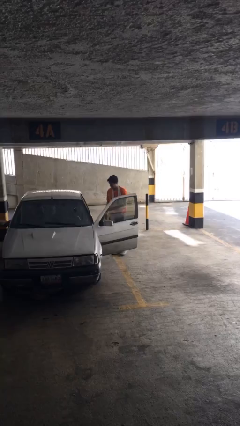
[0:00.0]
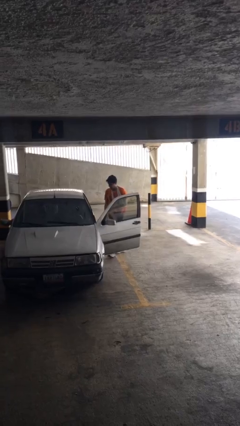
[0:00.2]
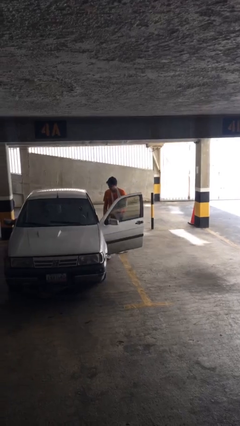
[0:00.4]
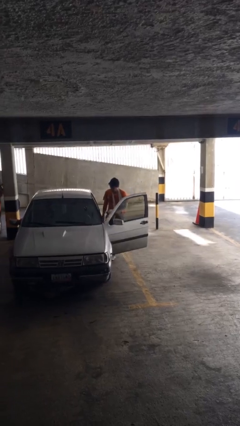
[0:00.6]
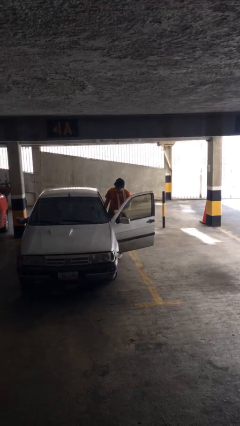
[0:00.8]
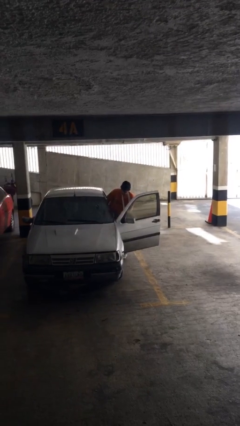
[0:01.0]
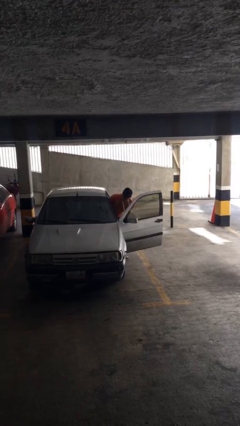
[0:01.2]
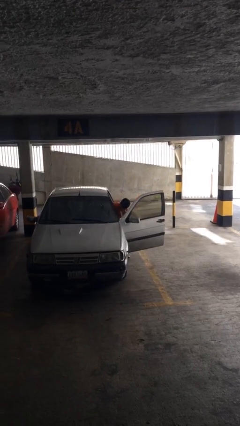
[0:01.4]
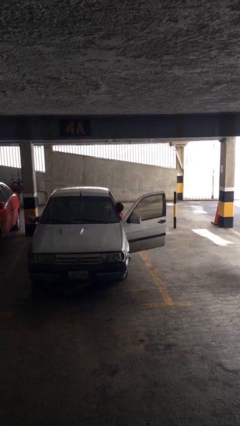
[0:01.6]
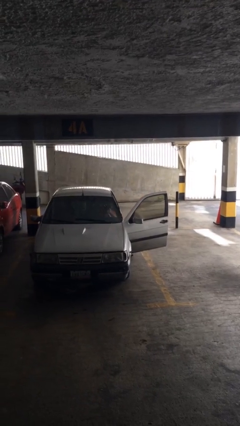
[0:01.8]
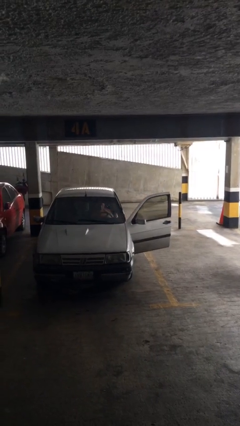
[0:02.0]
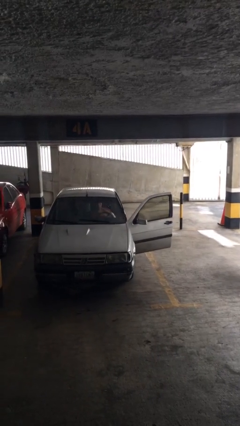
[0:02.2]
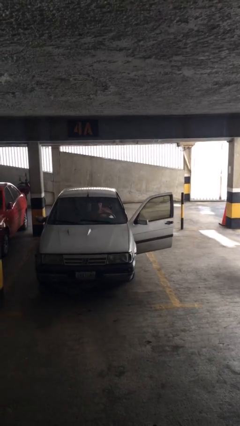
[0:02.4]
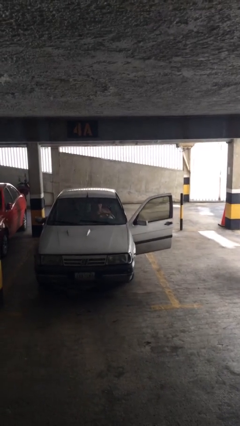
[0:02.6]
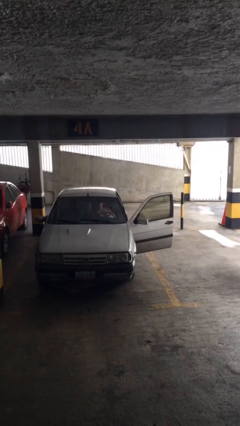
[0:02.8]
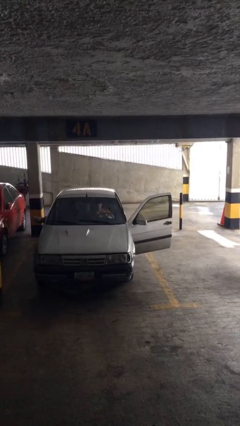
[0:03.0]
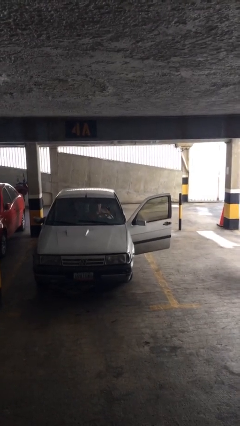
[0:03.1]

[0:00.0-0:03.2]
person enters car

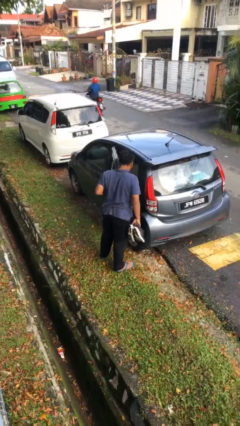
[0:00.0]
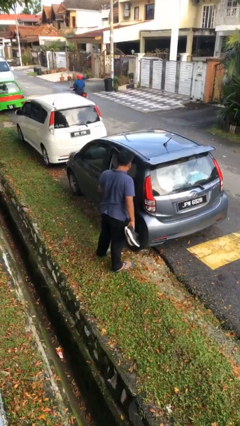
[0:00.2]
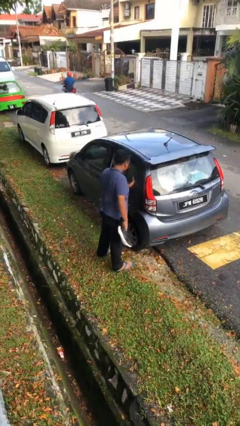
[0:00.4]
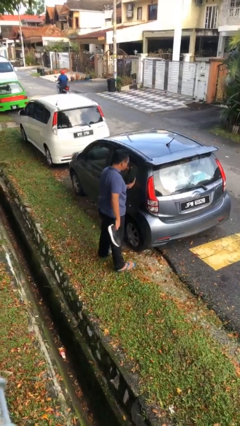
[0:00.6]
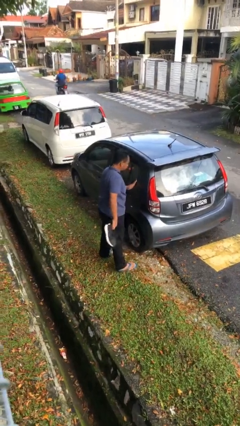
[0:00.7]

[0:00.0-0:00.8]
person closes car door

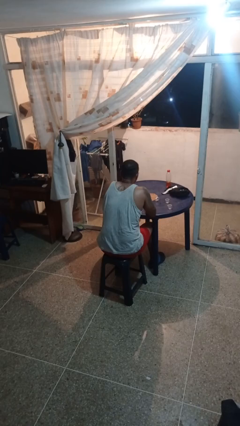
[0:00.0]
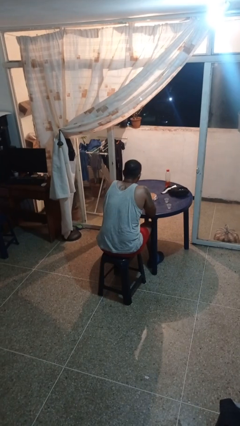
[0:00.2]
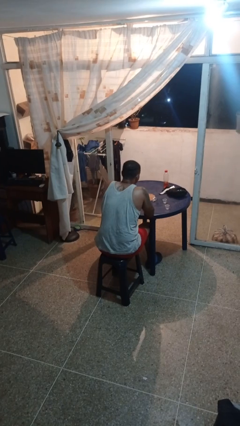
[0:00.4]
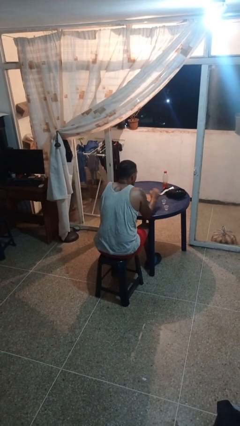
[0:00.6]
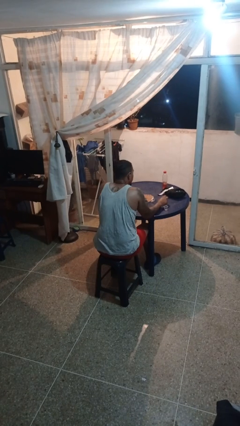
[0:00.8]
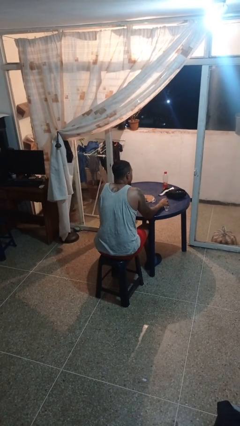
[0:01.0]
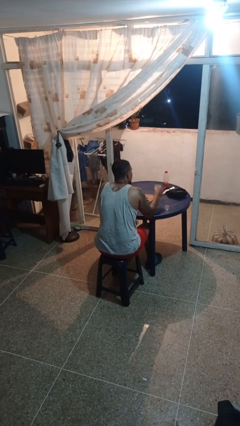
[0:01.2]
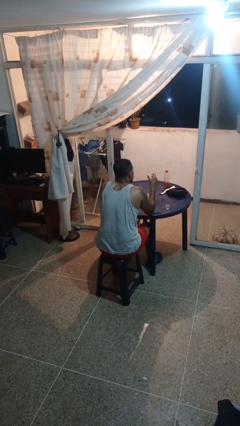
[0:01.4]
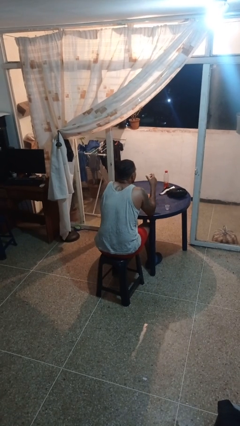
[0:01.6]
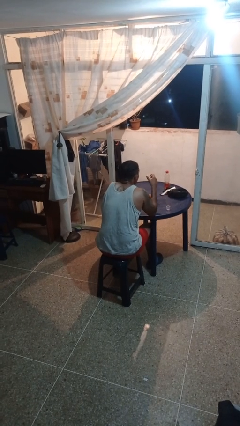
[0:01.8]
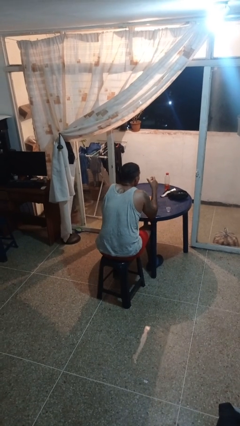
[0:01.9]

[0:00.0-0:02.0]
person picks up object from table

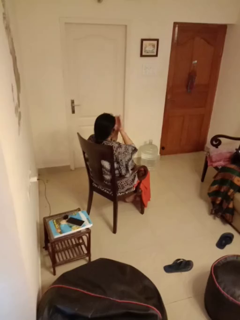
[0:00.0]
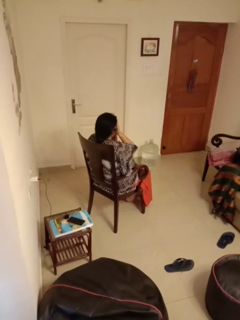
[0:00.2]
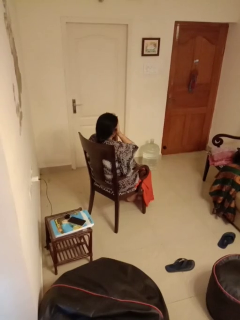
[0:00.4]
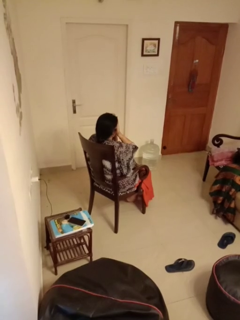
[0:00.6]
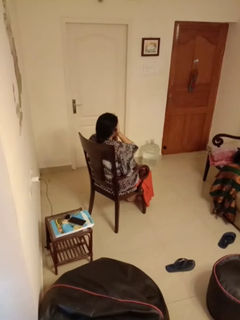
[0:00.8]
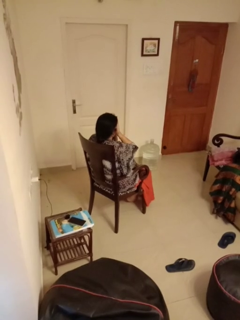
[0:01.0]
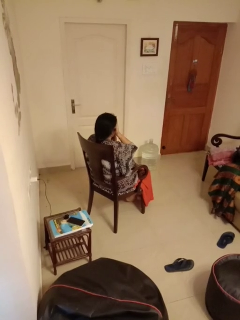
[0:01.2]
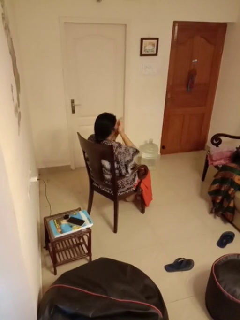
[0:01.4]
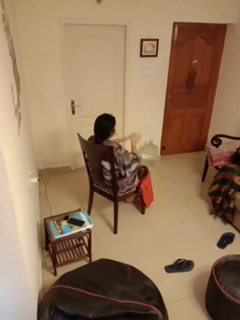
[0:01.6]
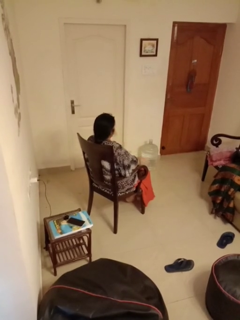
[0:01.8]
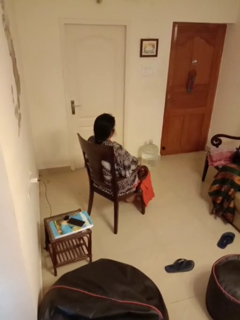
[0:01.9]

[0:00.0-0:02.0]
person covers face with hands

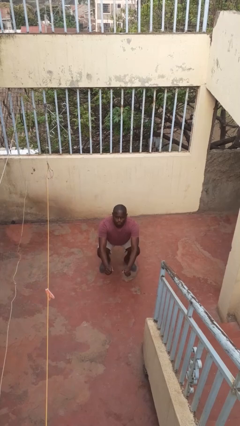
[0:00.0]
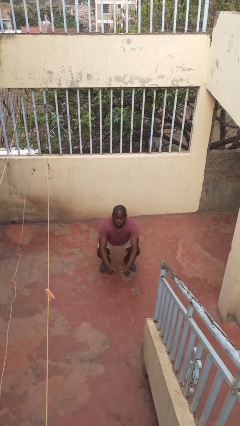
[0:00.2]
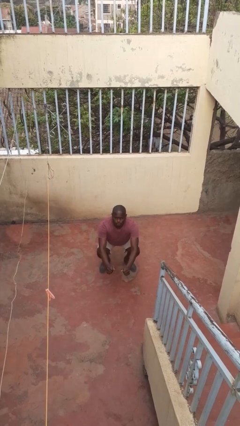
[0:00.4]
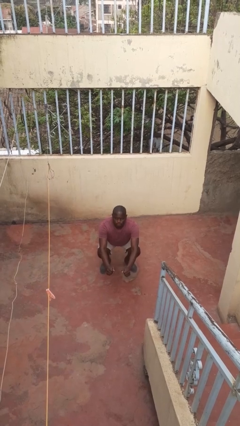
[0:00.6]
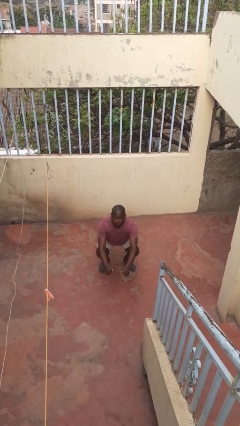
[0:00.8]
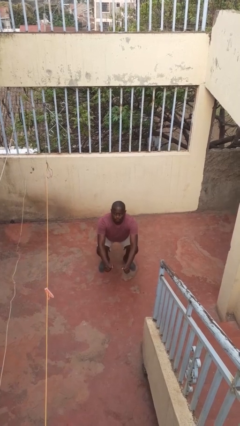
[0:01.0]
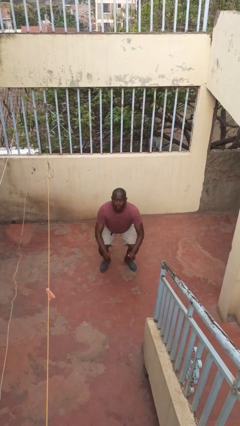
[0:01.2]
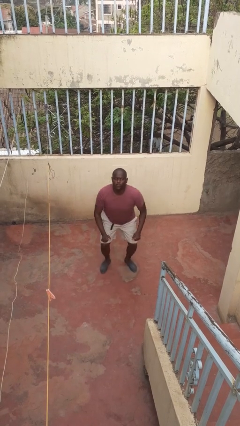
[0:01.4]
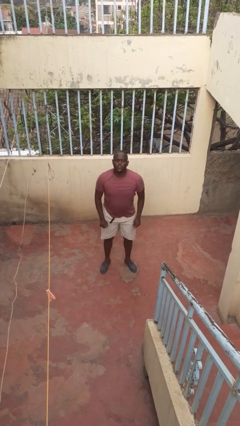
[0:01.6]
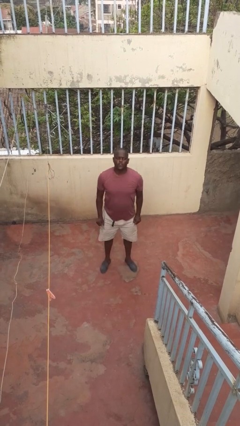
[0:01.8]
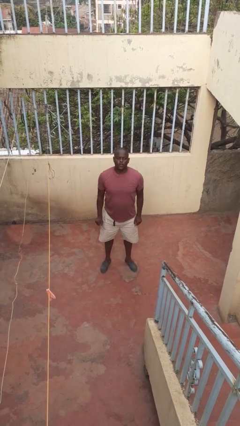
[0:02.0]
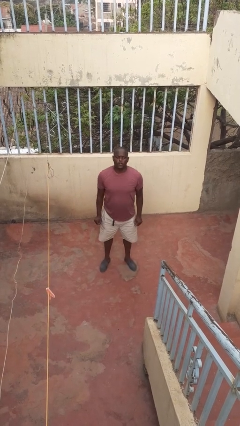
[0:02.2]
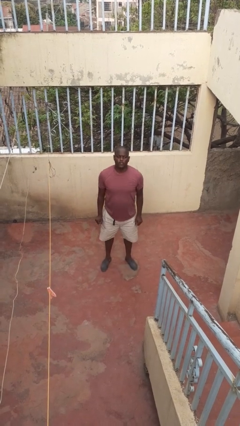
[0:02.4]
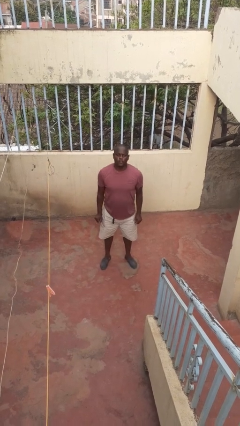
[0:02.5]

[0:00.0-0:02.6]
person stands up

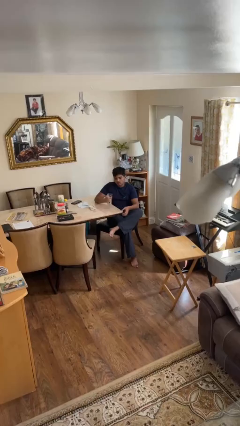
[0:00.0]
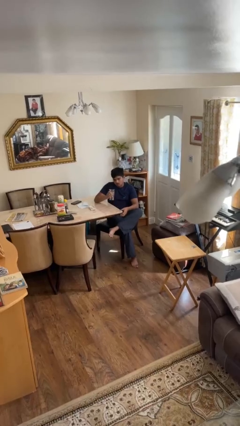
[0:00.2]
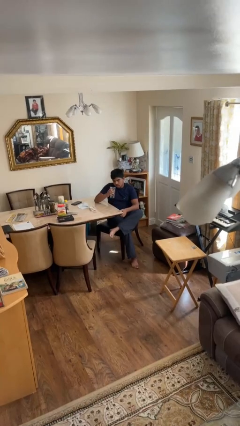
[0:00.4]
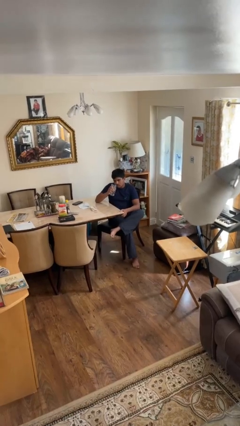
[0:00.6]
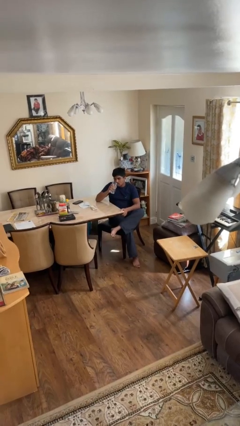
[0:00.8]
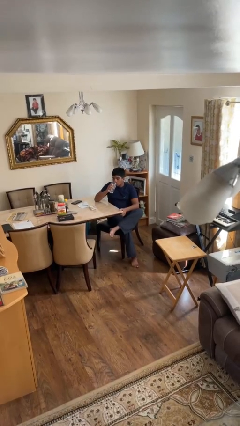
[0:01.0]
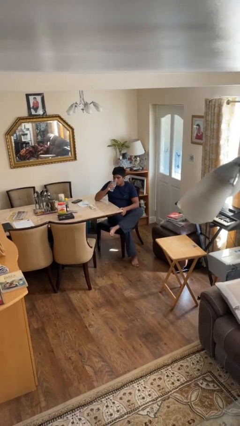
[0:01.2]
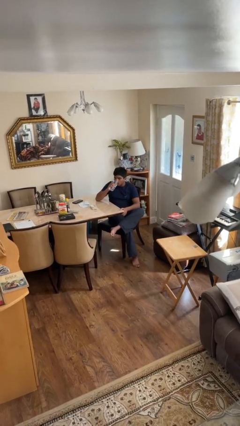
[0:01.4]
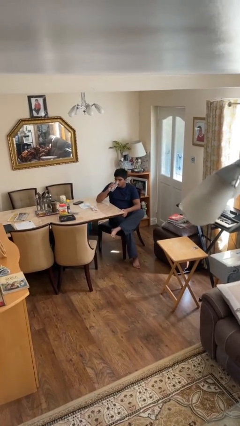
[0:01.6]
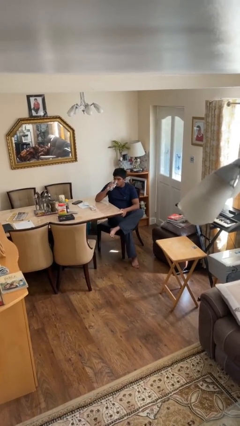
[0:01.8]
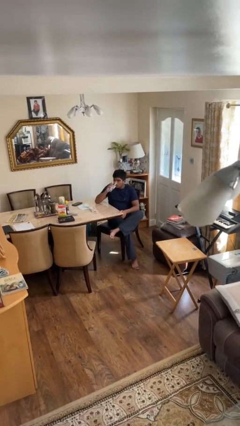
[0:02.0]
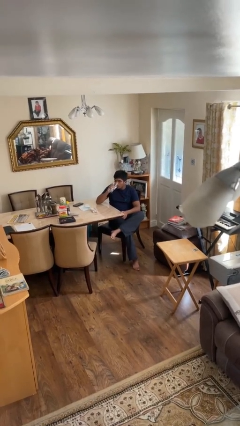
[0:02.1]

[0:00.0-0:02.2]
person drinks from cup

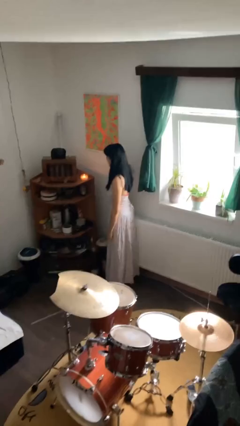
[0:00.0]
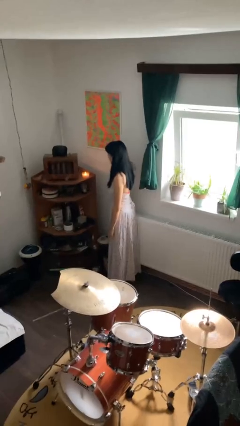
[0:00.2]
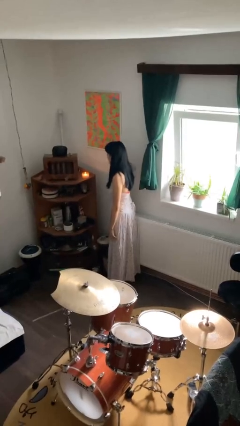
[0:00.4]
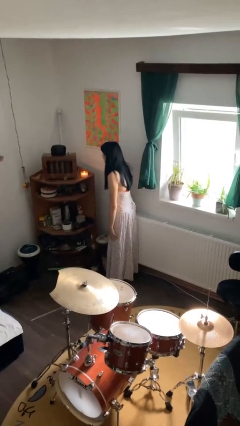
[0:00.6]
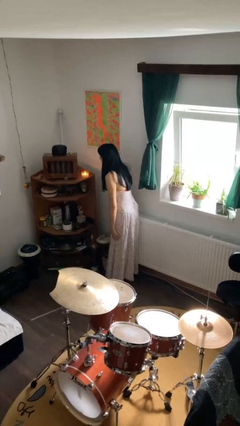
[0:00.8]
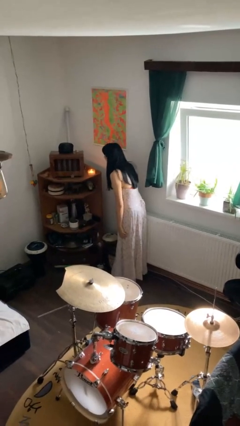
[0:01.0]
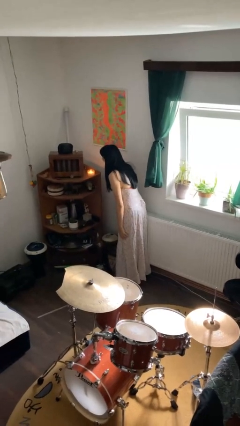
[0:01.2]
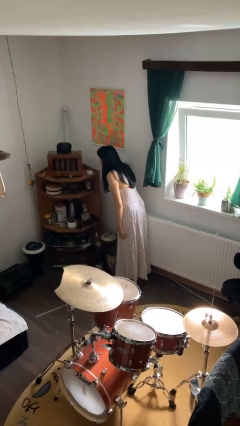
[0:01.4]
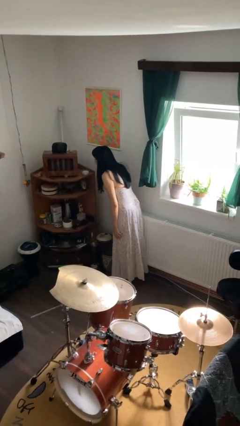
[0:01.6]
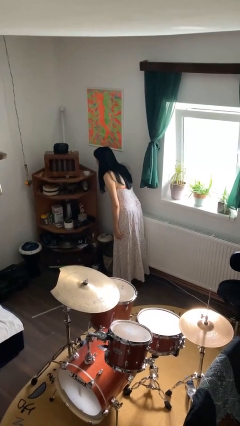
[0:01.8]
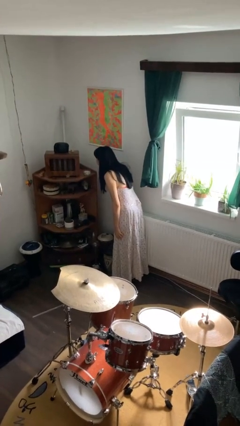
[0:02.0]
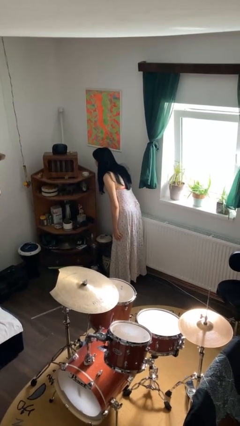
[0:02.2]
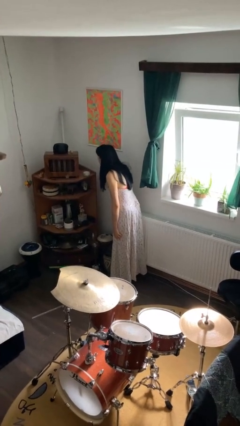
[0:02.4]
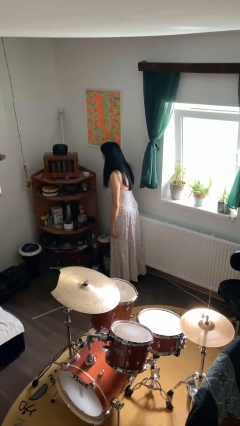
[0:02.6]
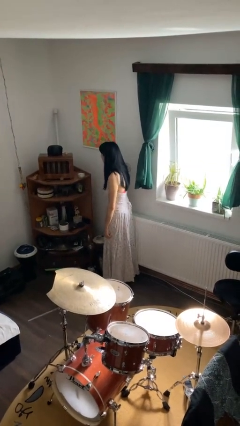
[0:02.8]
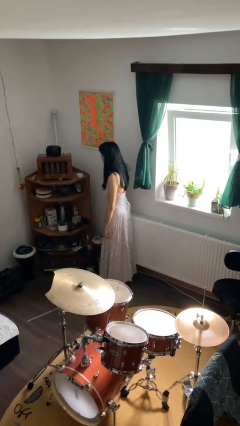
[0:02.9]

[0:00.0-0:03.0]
person extinguishes candle

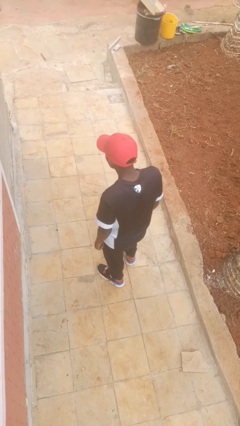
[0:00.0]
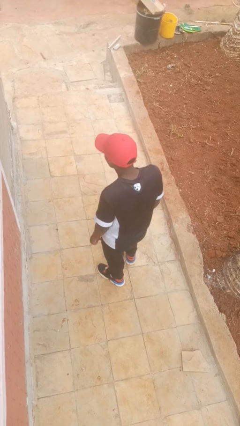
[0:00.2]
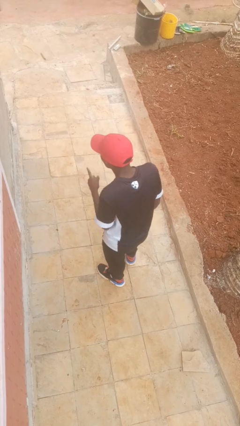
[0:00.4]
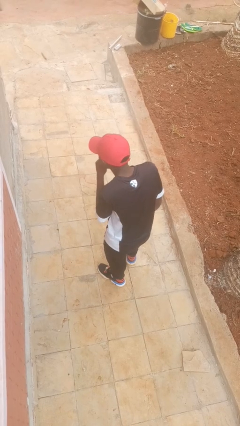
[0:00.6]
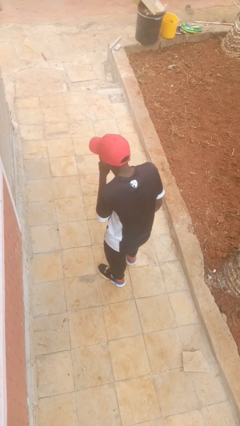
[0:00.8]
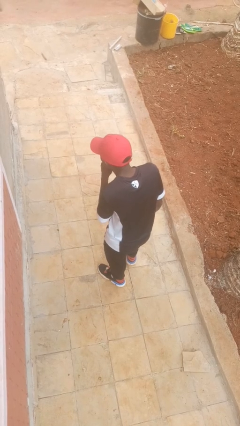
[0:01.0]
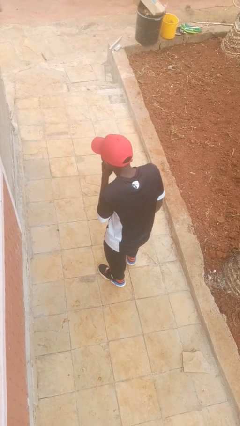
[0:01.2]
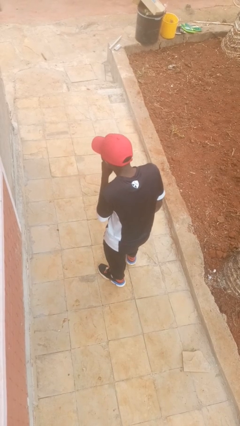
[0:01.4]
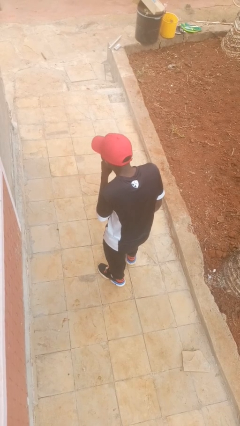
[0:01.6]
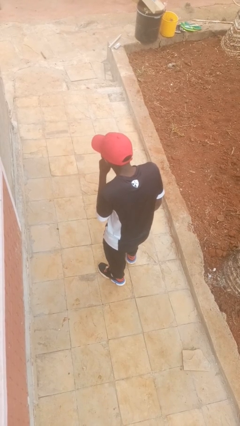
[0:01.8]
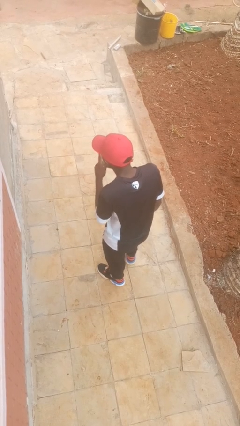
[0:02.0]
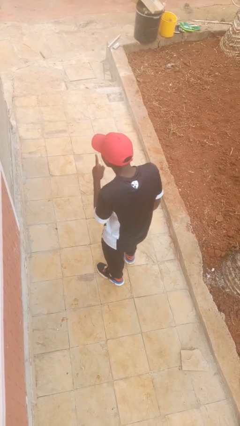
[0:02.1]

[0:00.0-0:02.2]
person gestures be quiet
